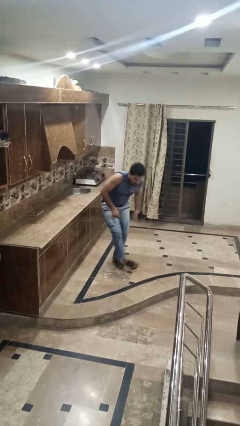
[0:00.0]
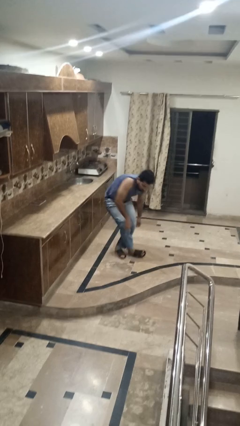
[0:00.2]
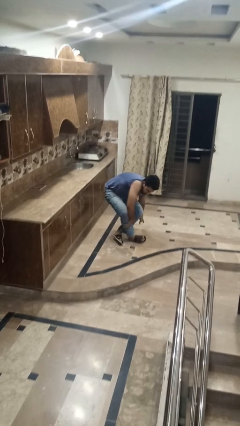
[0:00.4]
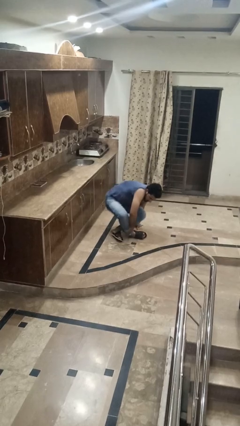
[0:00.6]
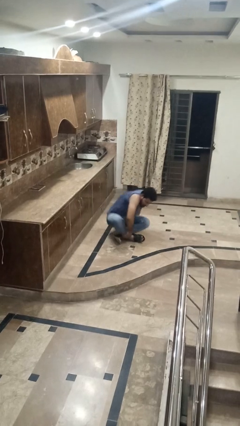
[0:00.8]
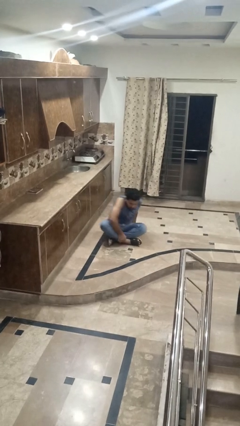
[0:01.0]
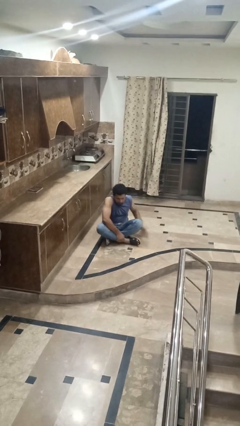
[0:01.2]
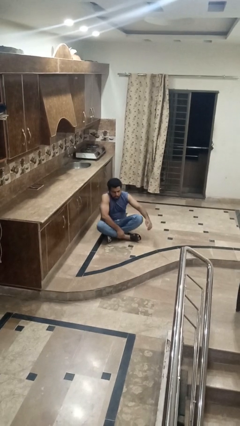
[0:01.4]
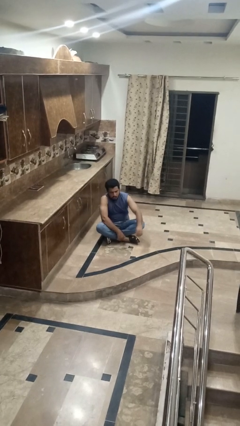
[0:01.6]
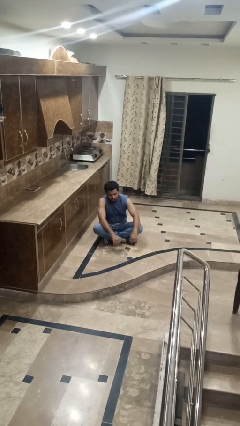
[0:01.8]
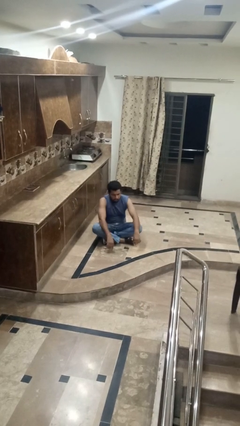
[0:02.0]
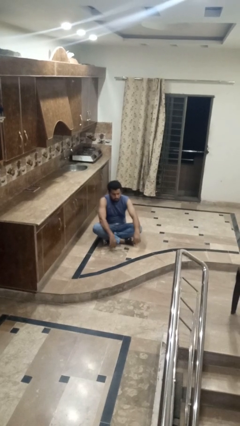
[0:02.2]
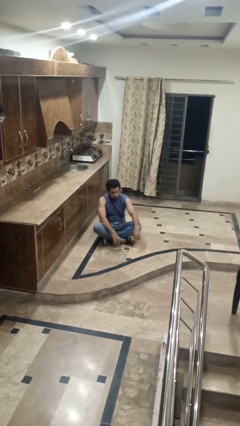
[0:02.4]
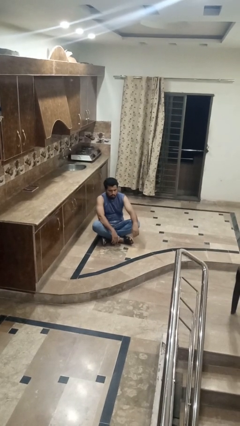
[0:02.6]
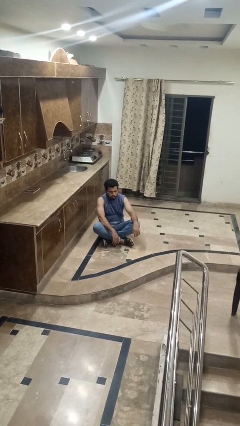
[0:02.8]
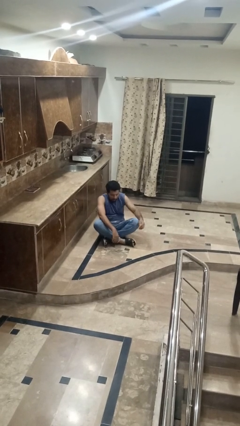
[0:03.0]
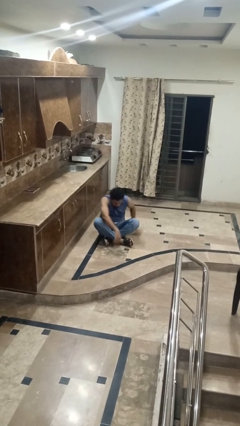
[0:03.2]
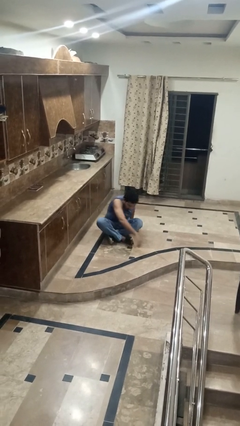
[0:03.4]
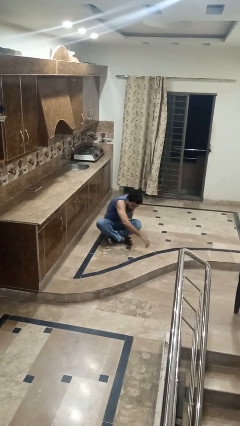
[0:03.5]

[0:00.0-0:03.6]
person sits crisscross

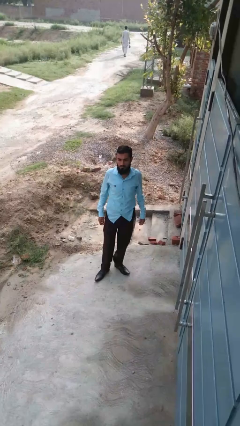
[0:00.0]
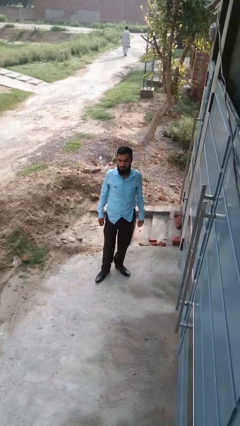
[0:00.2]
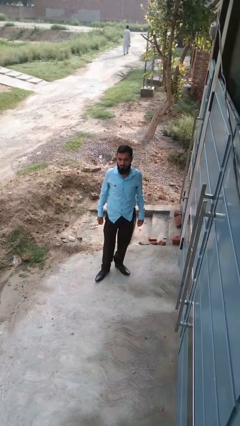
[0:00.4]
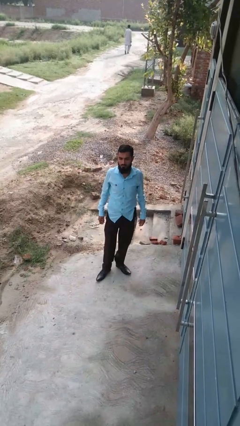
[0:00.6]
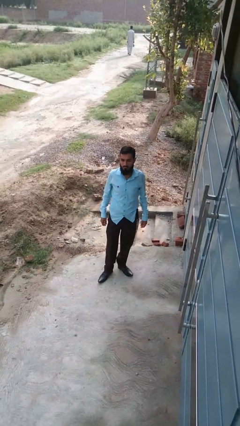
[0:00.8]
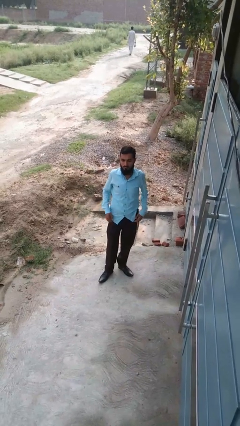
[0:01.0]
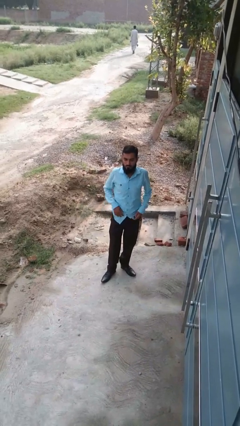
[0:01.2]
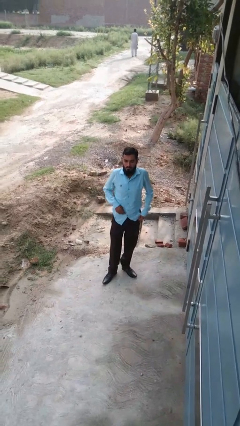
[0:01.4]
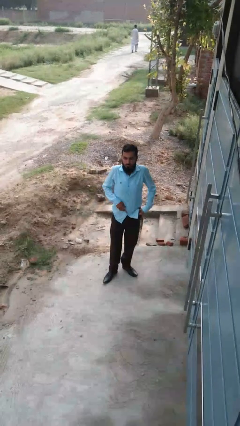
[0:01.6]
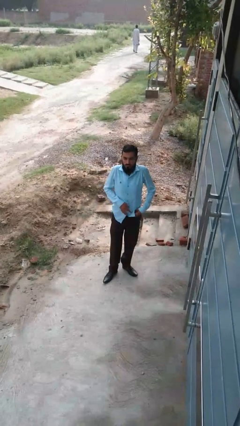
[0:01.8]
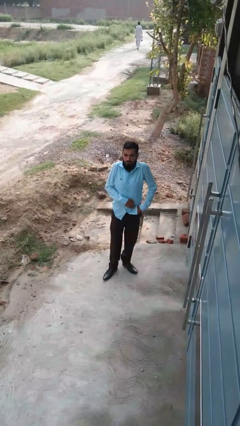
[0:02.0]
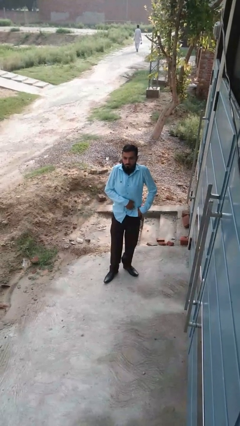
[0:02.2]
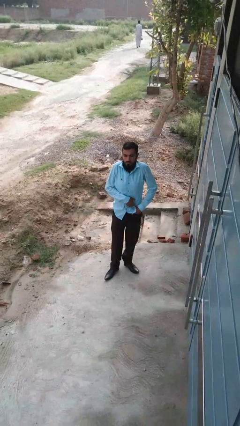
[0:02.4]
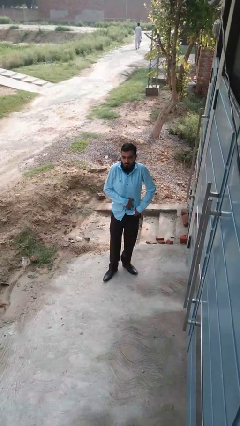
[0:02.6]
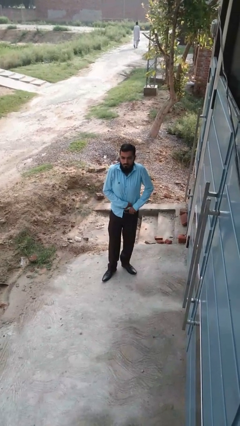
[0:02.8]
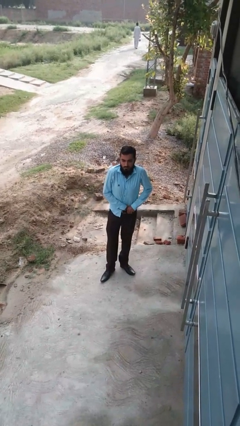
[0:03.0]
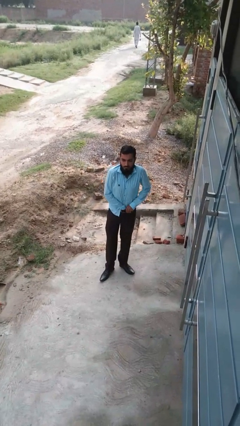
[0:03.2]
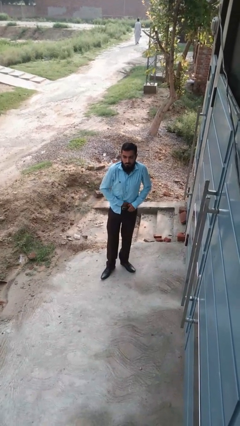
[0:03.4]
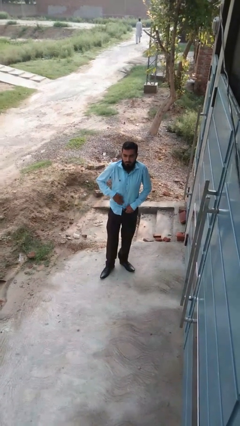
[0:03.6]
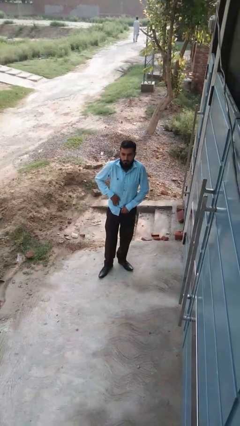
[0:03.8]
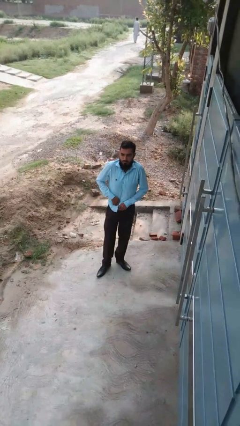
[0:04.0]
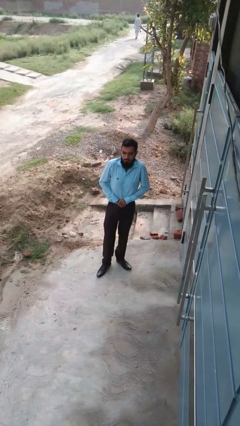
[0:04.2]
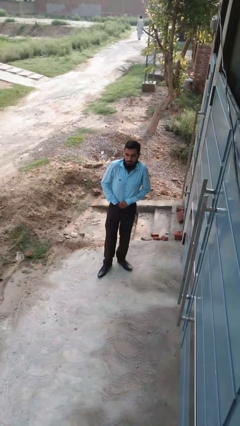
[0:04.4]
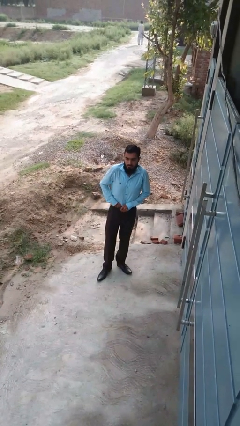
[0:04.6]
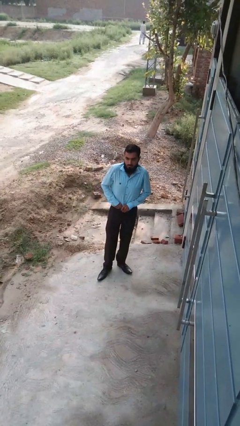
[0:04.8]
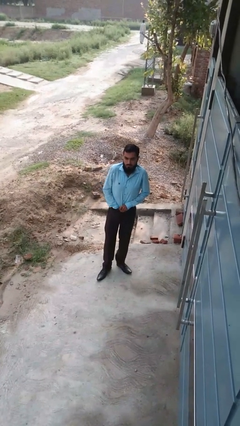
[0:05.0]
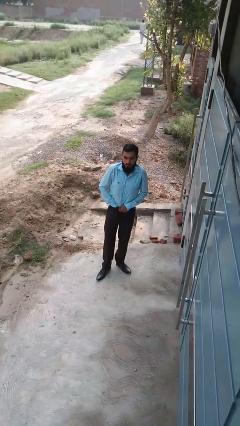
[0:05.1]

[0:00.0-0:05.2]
person tucks in shirt

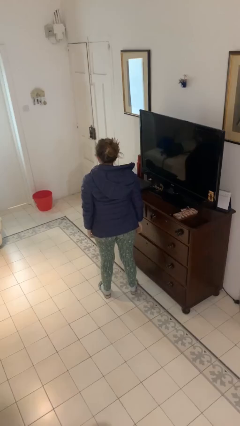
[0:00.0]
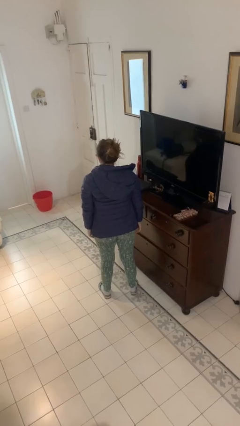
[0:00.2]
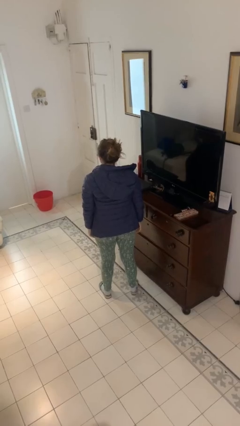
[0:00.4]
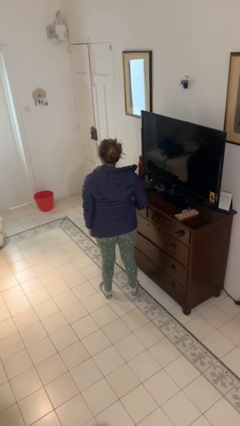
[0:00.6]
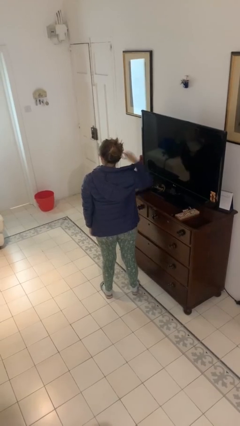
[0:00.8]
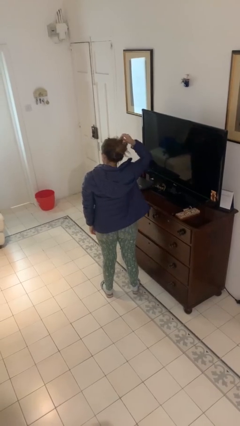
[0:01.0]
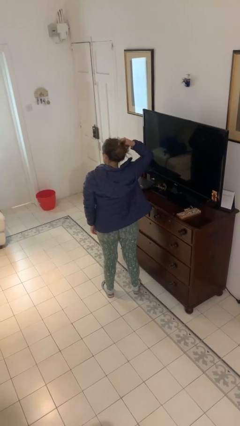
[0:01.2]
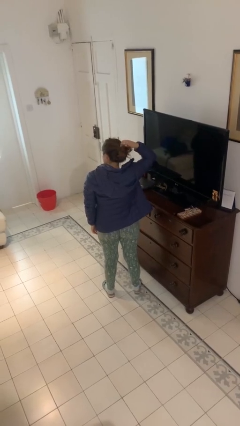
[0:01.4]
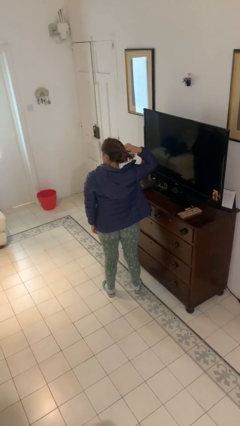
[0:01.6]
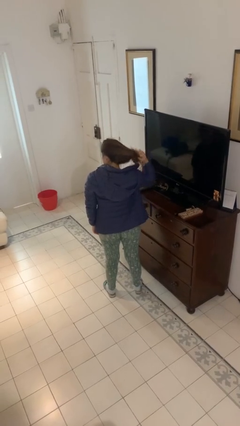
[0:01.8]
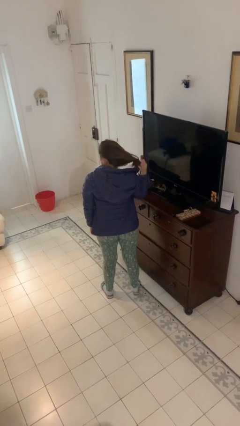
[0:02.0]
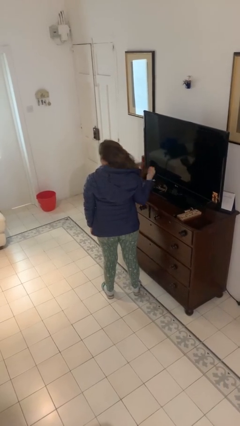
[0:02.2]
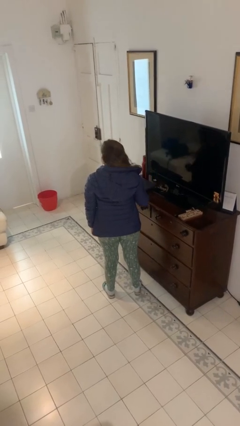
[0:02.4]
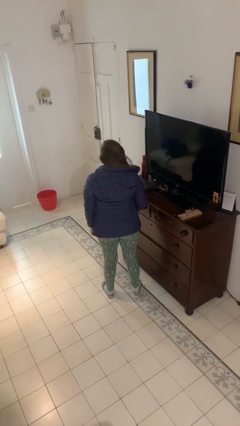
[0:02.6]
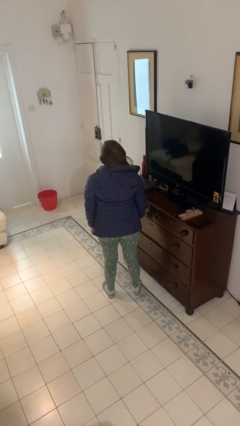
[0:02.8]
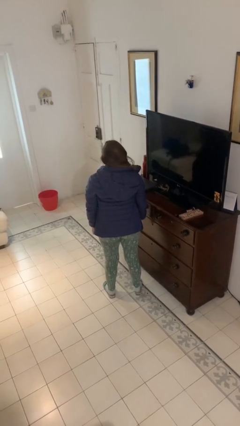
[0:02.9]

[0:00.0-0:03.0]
person takes off hairtie

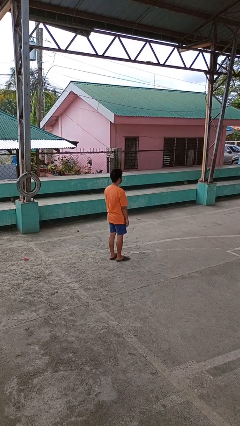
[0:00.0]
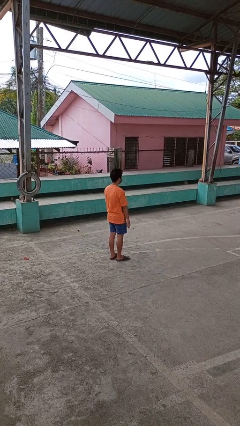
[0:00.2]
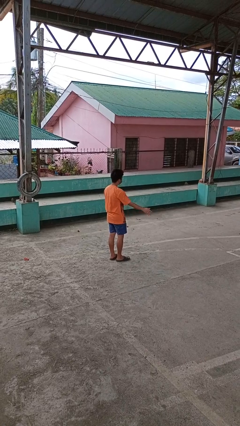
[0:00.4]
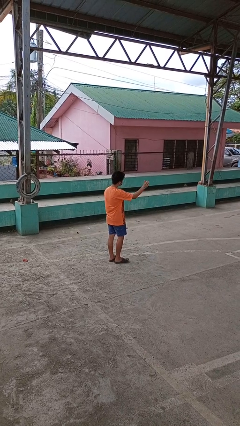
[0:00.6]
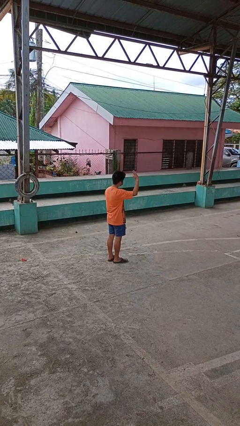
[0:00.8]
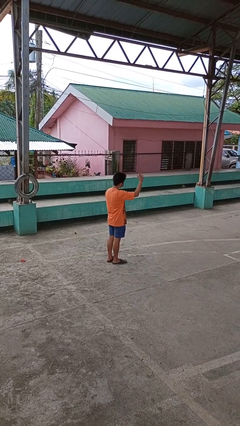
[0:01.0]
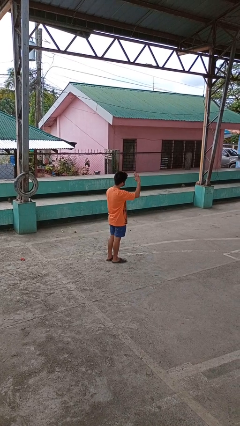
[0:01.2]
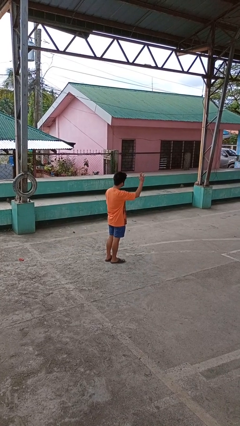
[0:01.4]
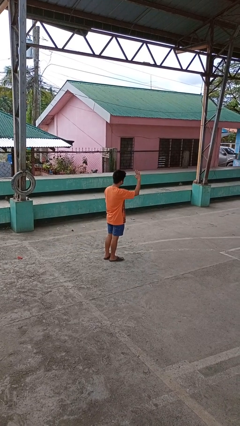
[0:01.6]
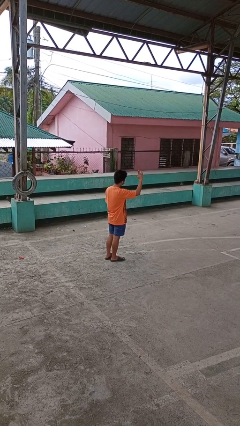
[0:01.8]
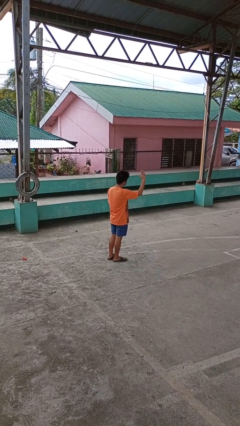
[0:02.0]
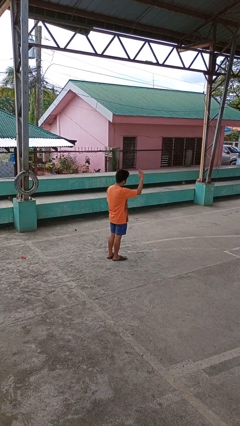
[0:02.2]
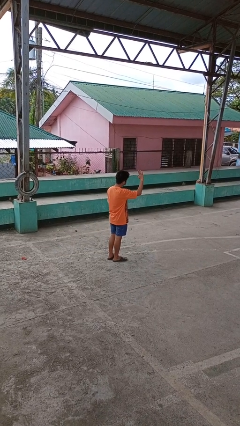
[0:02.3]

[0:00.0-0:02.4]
person waves at person

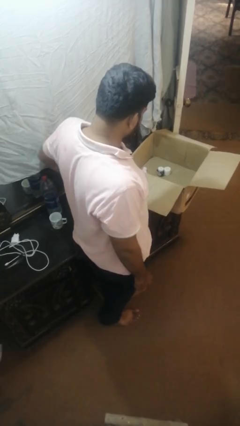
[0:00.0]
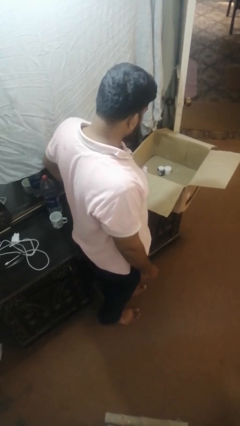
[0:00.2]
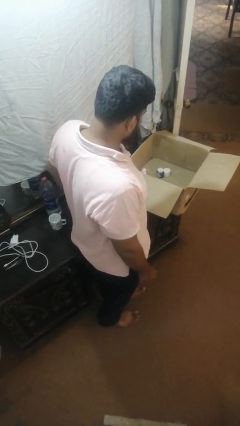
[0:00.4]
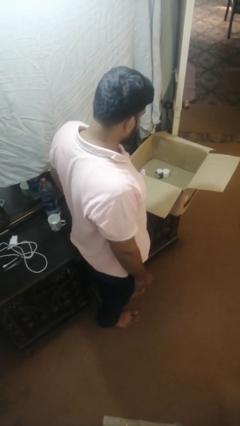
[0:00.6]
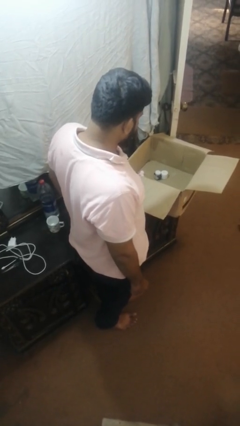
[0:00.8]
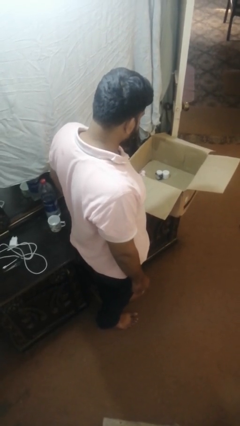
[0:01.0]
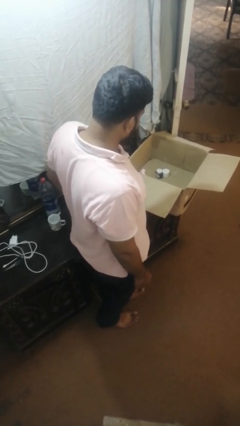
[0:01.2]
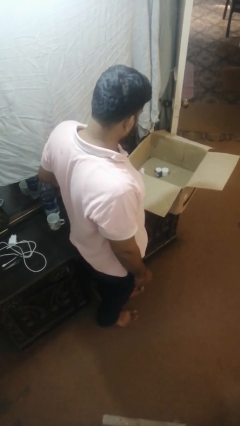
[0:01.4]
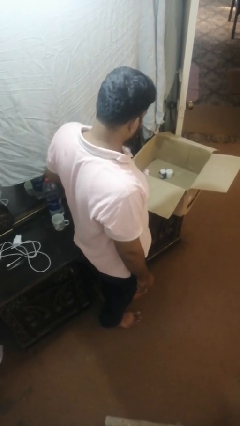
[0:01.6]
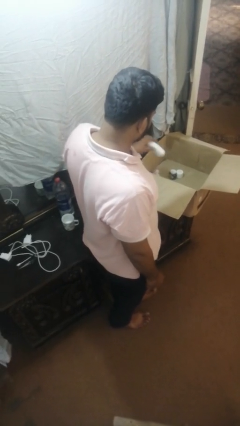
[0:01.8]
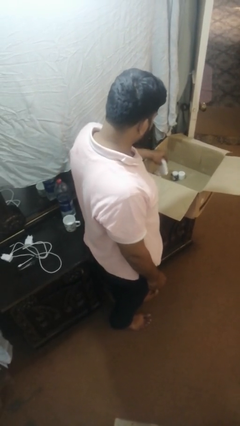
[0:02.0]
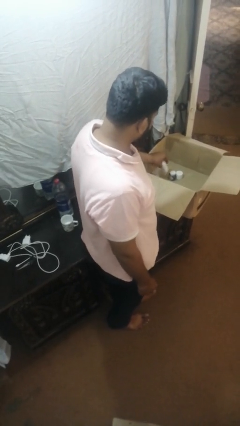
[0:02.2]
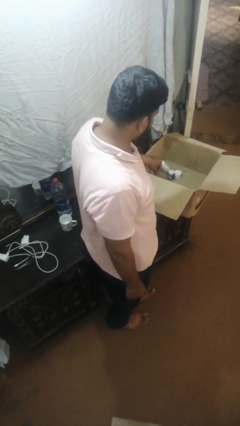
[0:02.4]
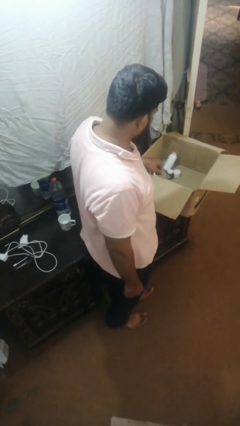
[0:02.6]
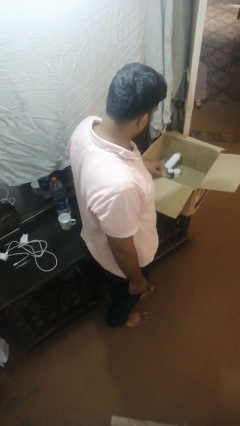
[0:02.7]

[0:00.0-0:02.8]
person puts object into box

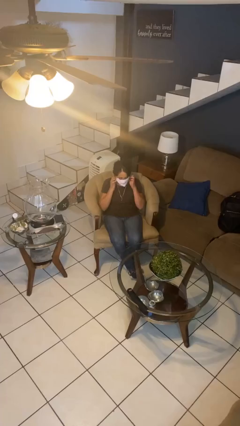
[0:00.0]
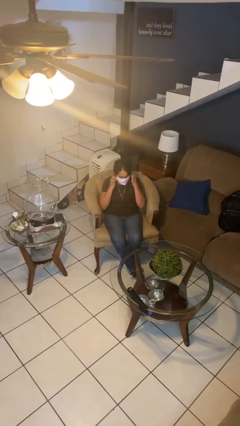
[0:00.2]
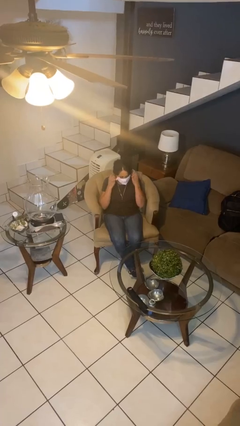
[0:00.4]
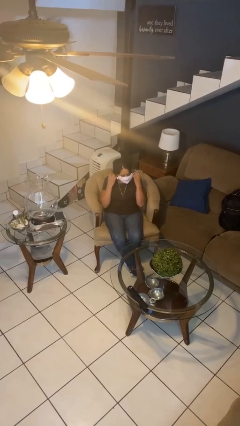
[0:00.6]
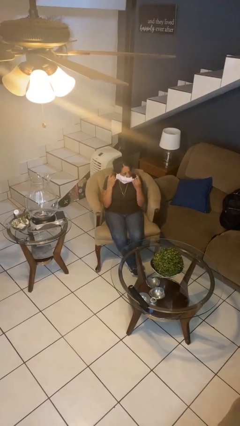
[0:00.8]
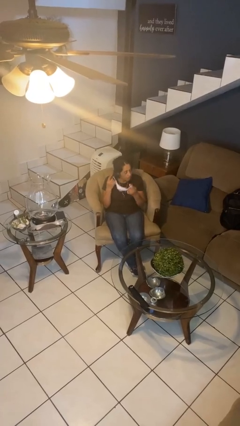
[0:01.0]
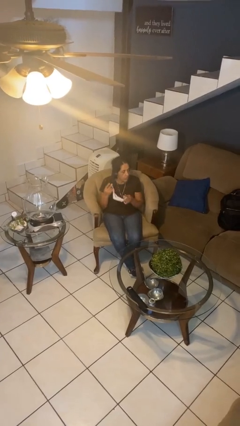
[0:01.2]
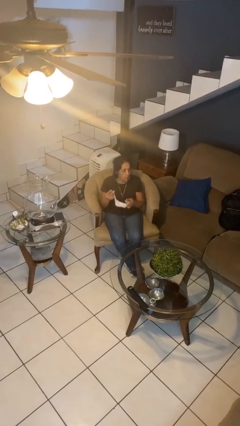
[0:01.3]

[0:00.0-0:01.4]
person takes off facemask
